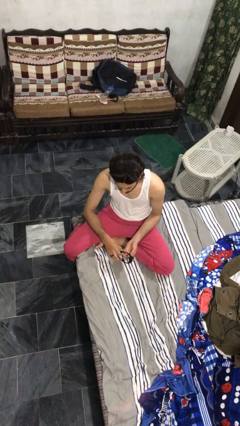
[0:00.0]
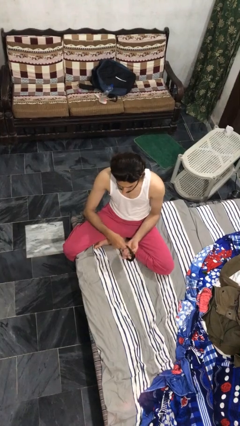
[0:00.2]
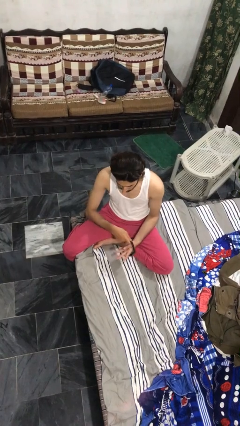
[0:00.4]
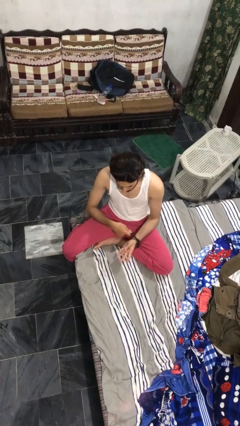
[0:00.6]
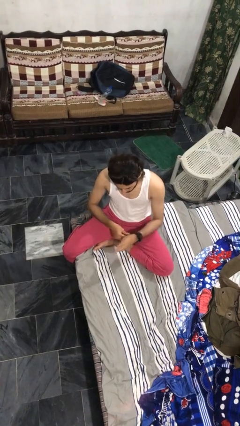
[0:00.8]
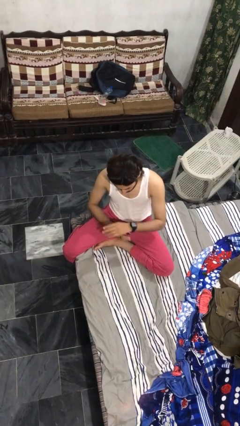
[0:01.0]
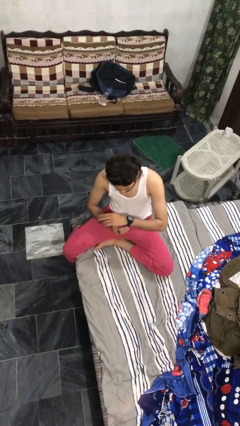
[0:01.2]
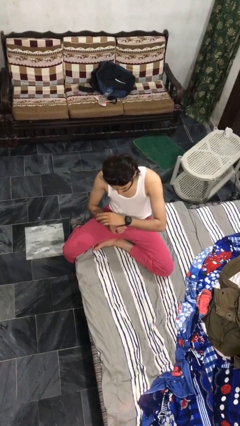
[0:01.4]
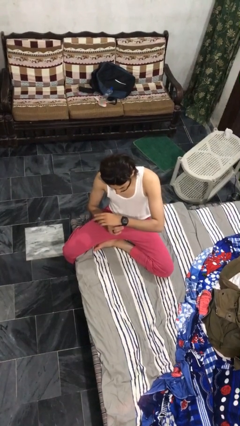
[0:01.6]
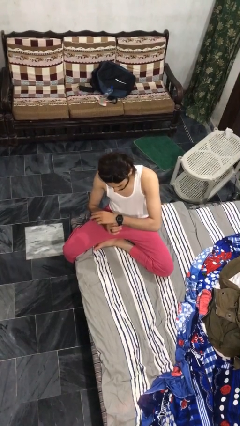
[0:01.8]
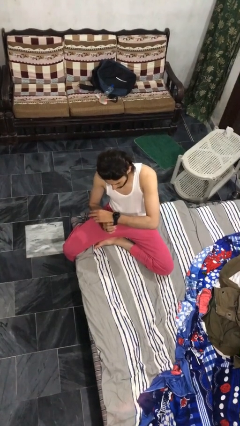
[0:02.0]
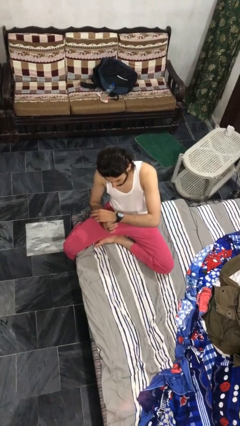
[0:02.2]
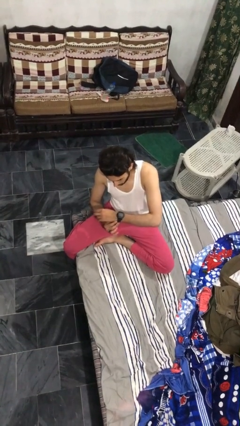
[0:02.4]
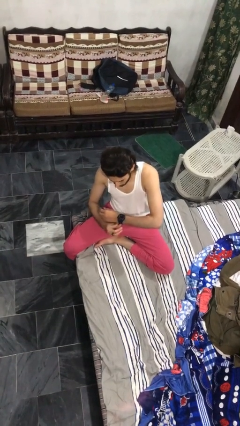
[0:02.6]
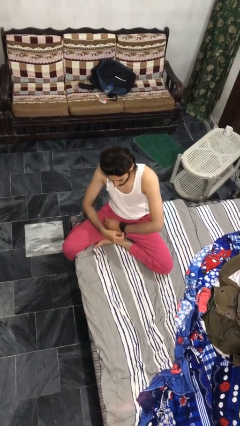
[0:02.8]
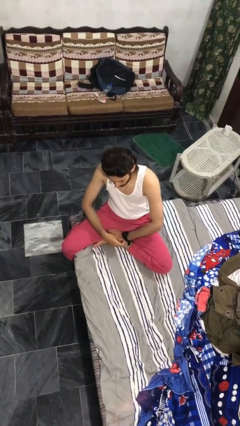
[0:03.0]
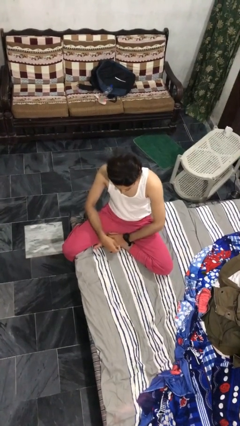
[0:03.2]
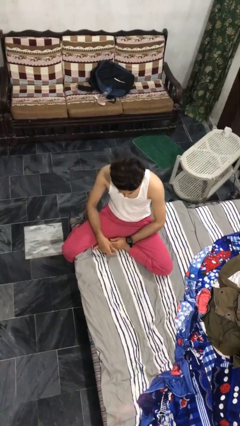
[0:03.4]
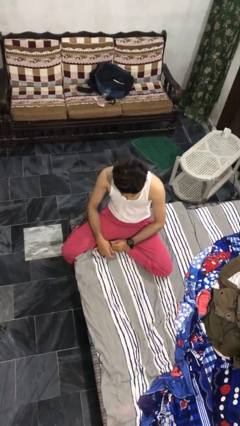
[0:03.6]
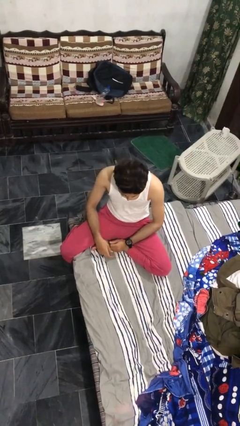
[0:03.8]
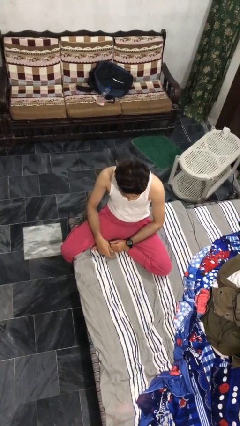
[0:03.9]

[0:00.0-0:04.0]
person puts on wristwatch

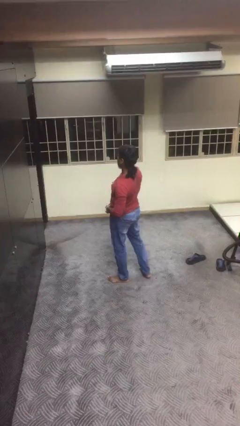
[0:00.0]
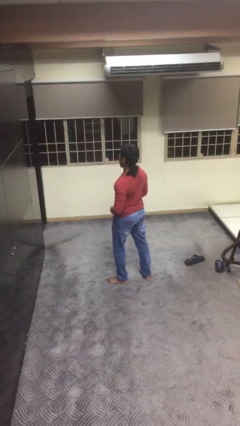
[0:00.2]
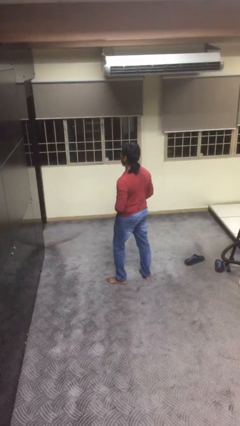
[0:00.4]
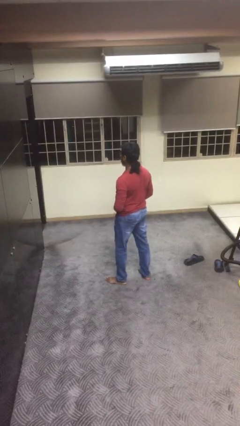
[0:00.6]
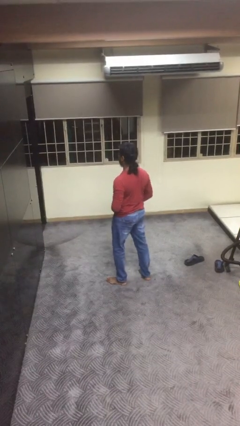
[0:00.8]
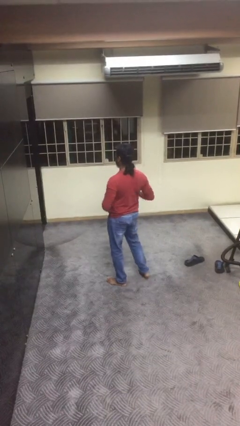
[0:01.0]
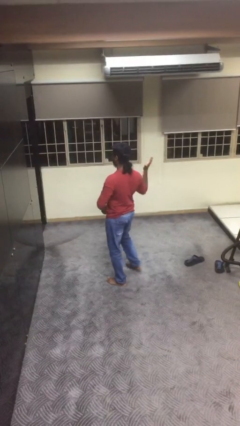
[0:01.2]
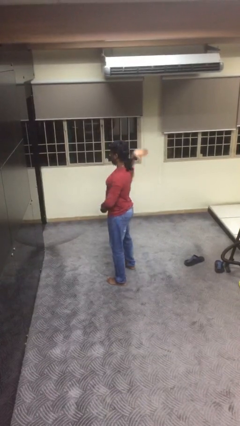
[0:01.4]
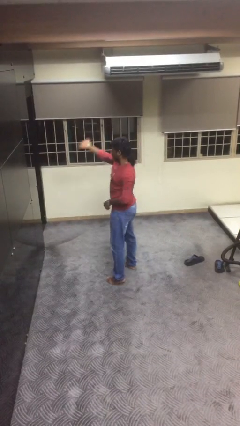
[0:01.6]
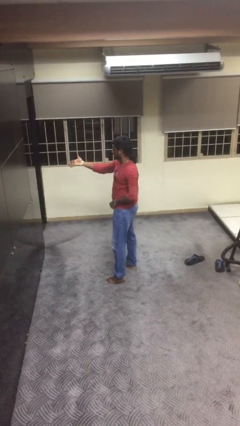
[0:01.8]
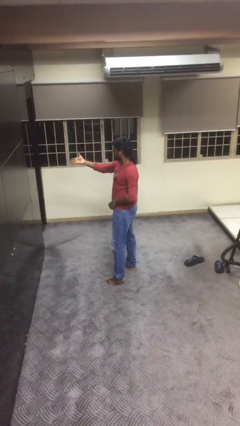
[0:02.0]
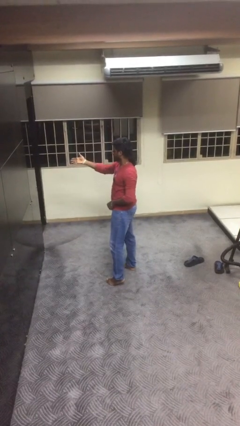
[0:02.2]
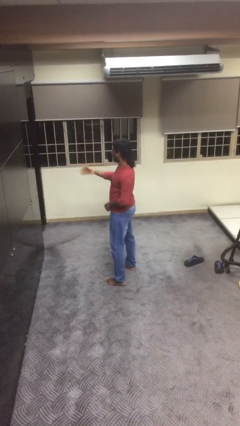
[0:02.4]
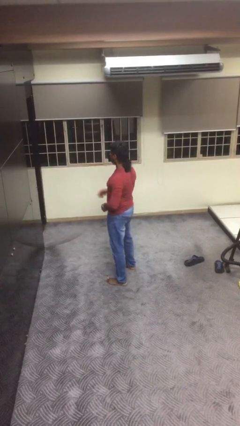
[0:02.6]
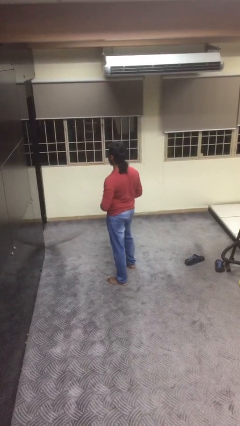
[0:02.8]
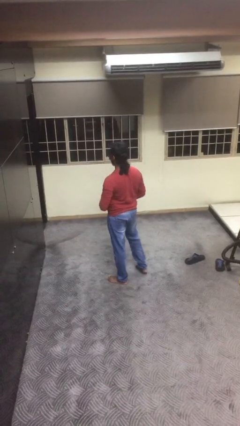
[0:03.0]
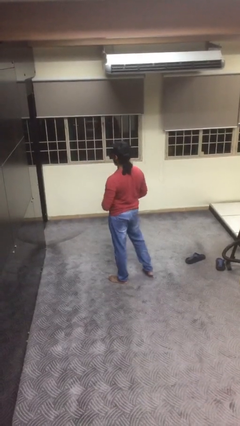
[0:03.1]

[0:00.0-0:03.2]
person karate chop

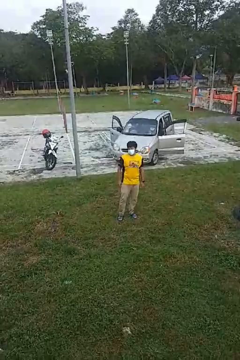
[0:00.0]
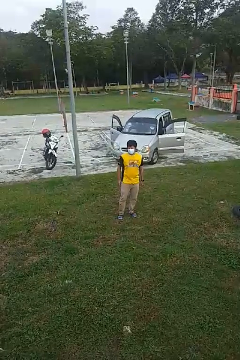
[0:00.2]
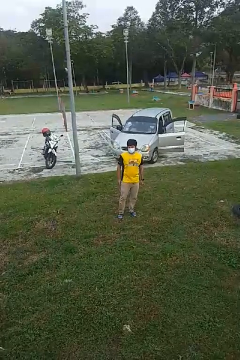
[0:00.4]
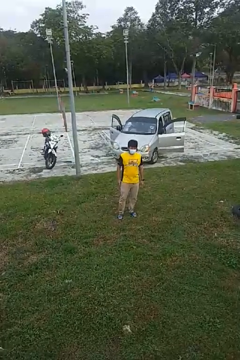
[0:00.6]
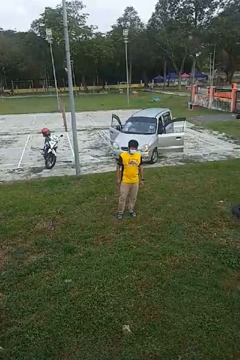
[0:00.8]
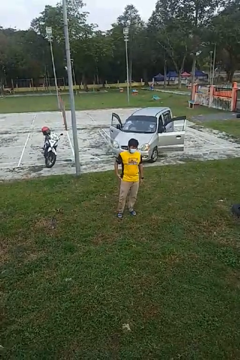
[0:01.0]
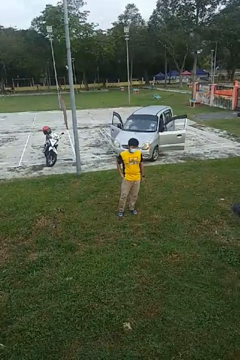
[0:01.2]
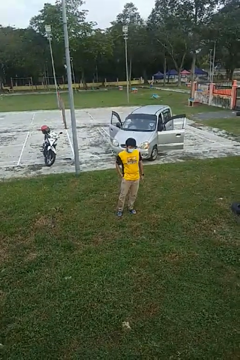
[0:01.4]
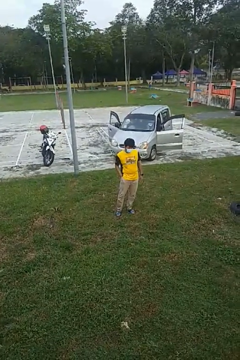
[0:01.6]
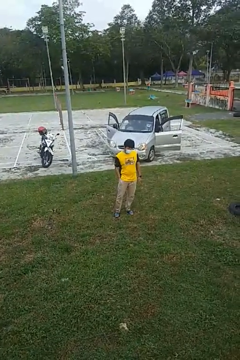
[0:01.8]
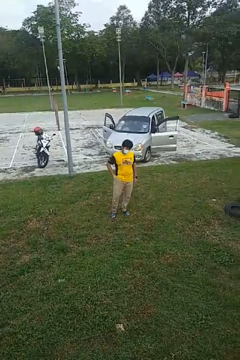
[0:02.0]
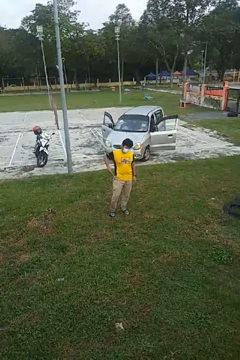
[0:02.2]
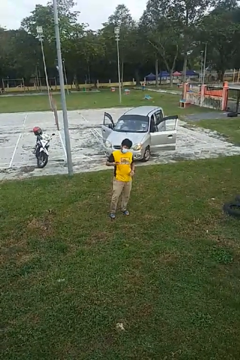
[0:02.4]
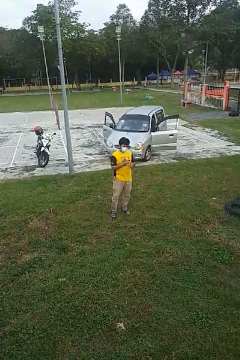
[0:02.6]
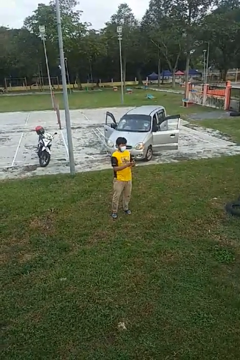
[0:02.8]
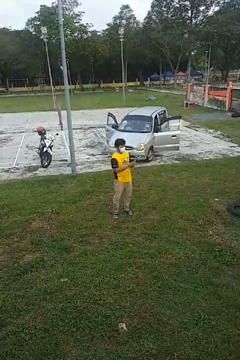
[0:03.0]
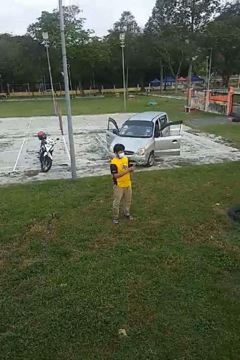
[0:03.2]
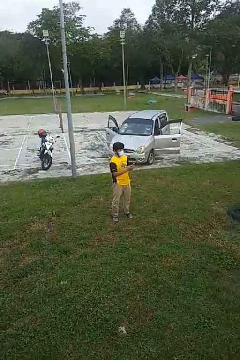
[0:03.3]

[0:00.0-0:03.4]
person takes phone from pocket

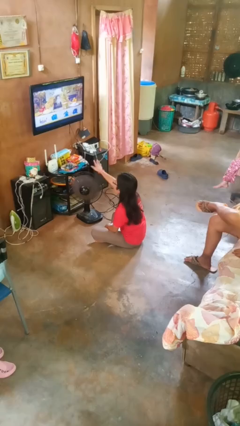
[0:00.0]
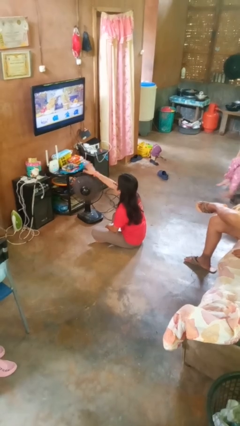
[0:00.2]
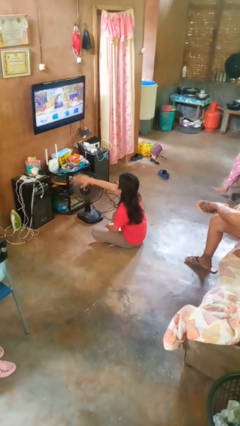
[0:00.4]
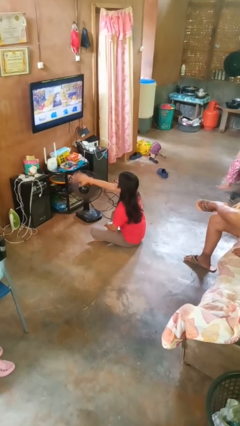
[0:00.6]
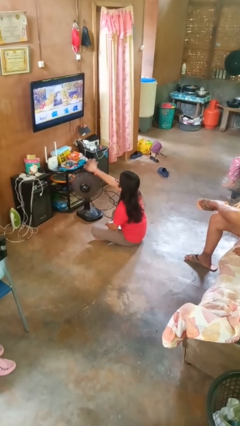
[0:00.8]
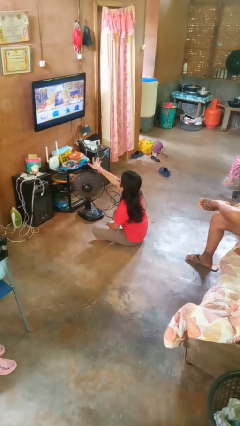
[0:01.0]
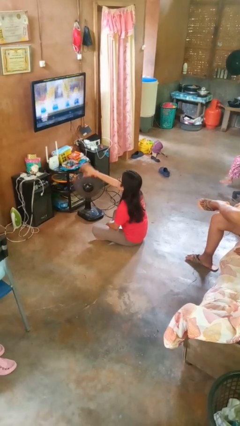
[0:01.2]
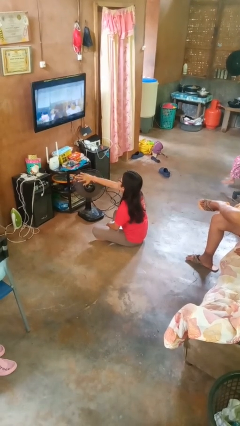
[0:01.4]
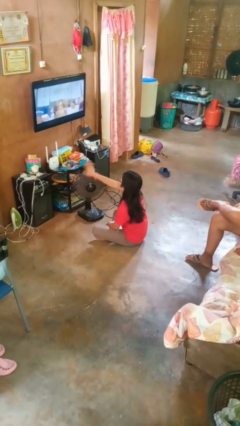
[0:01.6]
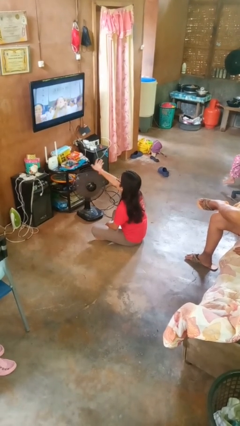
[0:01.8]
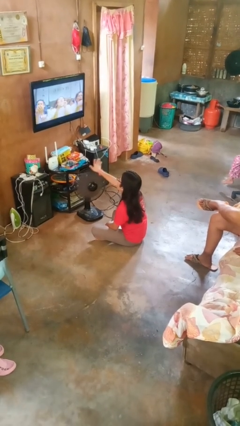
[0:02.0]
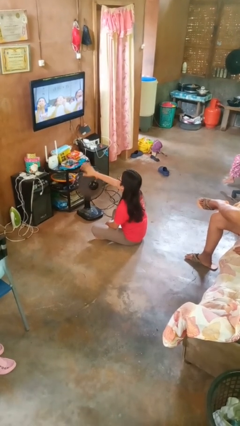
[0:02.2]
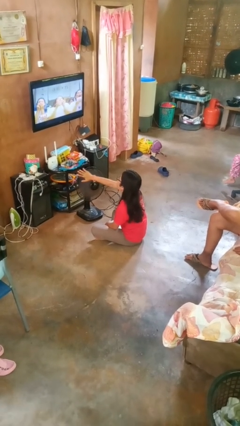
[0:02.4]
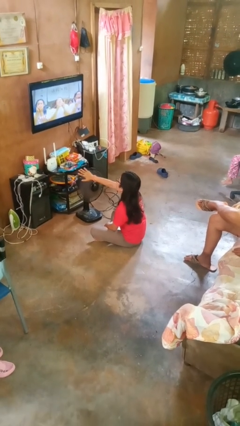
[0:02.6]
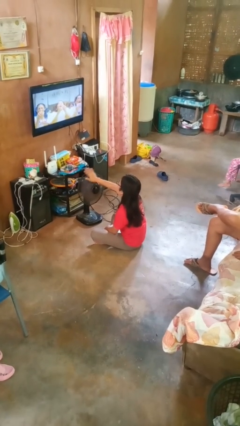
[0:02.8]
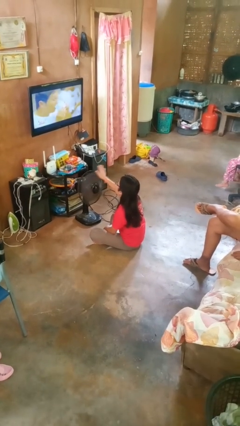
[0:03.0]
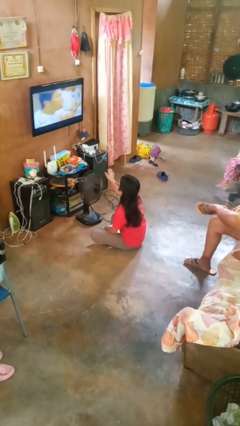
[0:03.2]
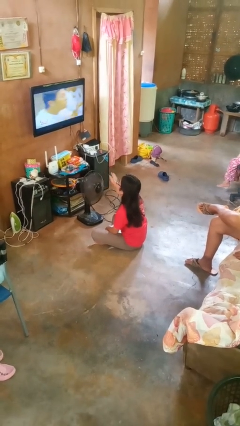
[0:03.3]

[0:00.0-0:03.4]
person waves hand over object

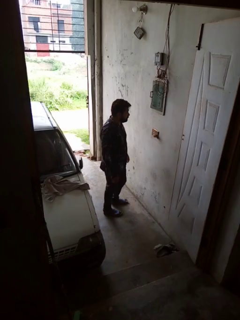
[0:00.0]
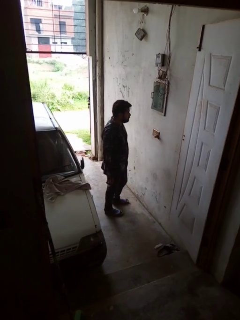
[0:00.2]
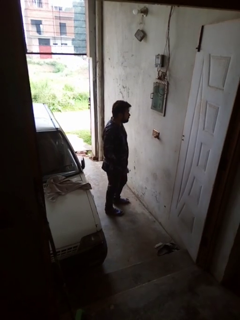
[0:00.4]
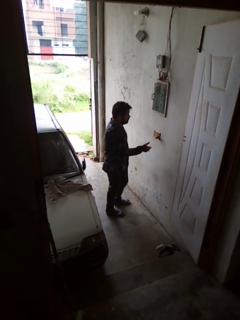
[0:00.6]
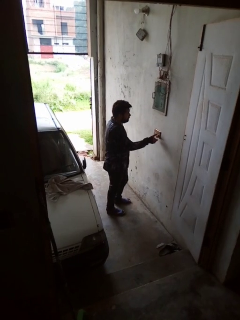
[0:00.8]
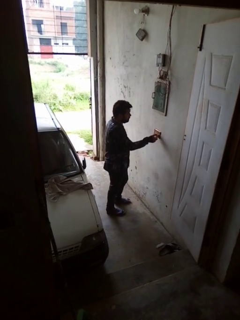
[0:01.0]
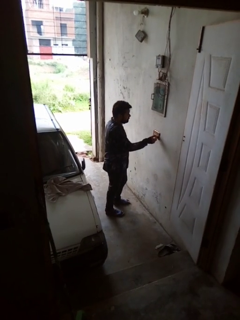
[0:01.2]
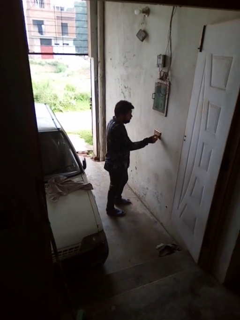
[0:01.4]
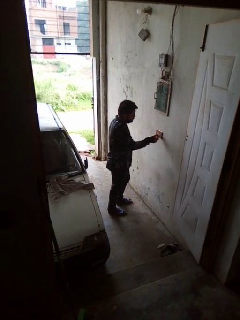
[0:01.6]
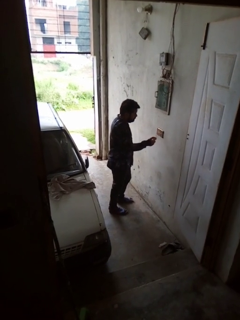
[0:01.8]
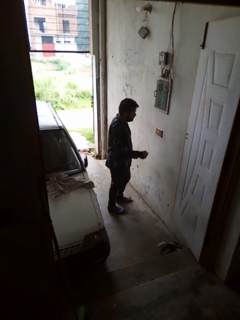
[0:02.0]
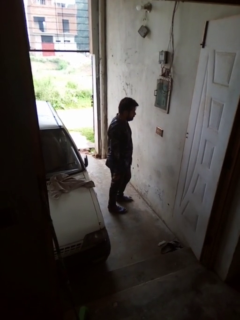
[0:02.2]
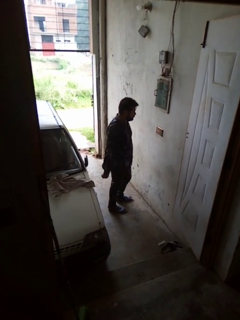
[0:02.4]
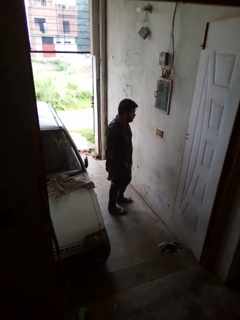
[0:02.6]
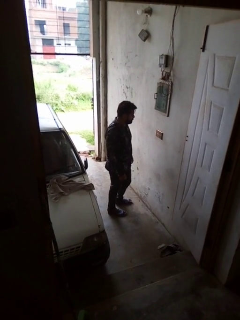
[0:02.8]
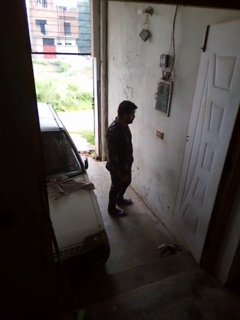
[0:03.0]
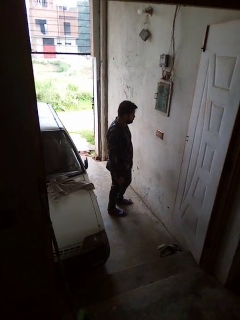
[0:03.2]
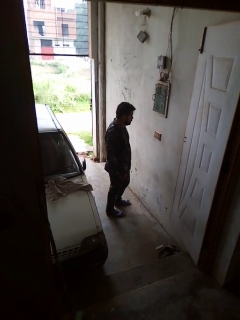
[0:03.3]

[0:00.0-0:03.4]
person unplugs from electrical socket

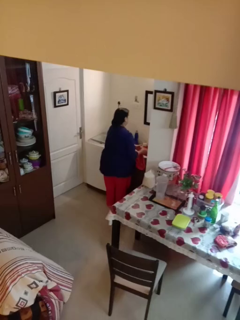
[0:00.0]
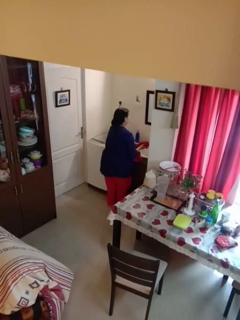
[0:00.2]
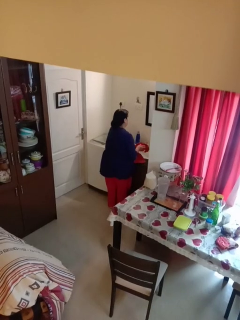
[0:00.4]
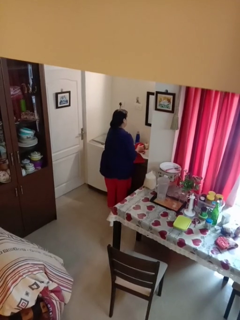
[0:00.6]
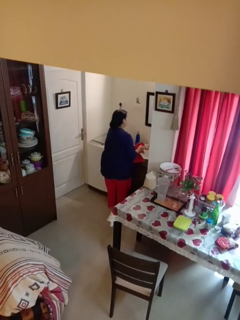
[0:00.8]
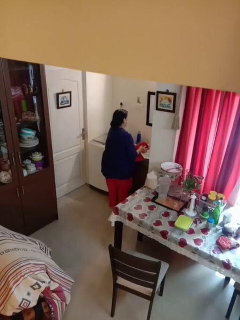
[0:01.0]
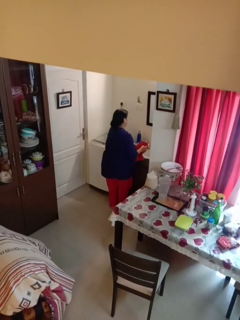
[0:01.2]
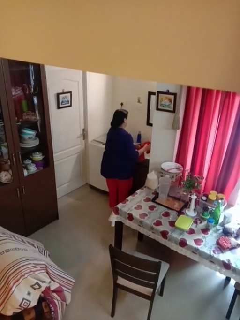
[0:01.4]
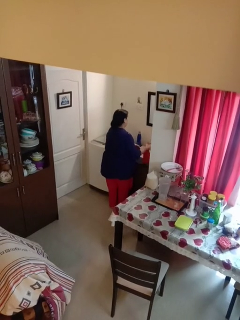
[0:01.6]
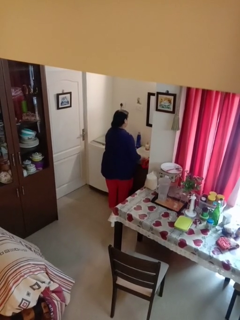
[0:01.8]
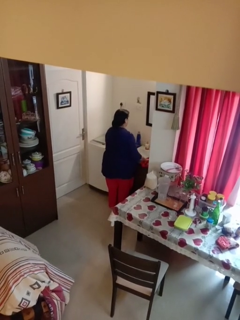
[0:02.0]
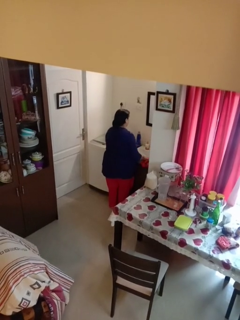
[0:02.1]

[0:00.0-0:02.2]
person dries hands with towel
